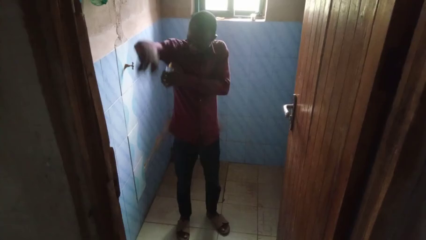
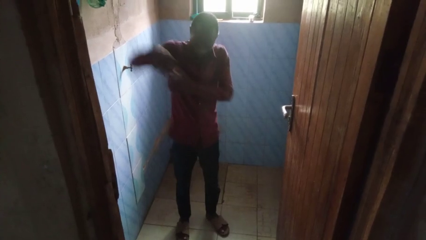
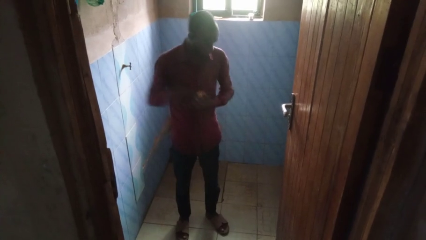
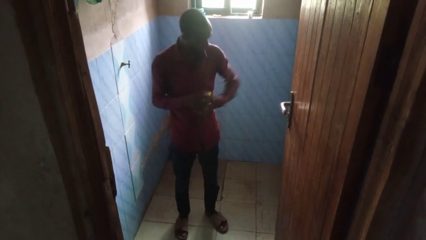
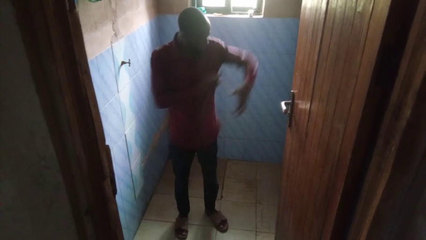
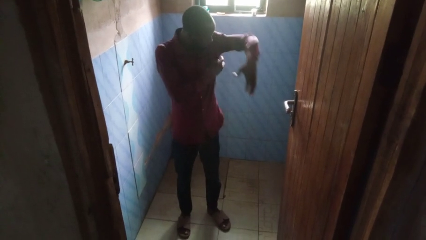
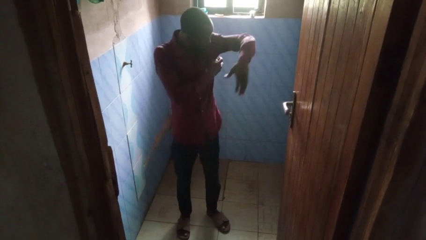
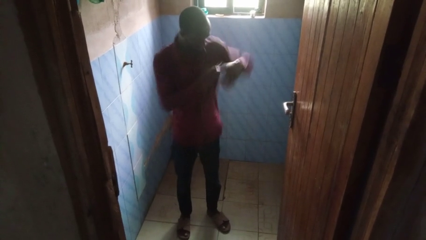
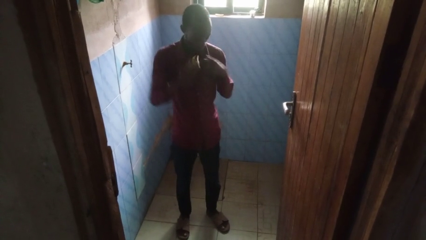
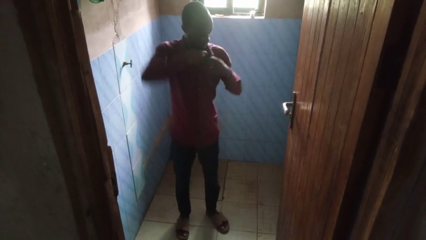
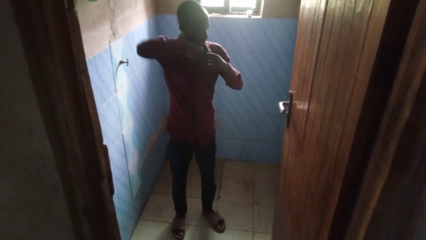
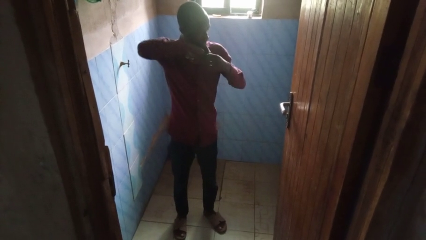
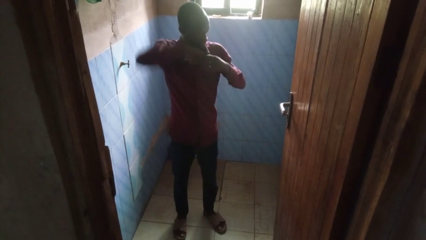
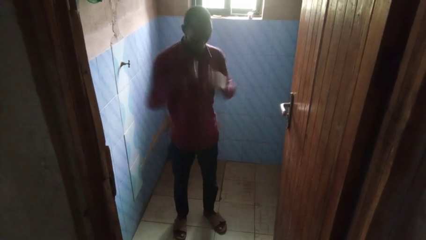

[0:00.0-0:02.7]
person applies deodorant

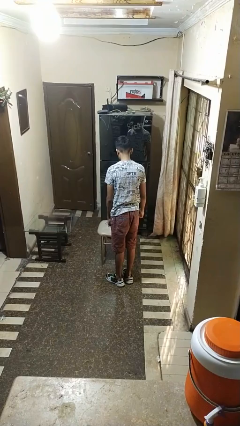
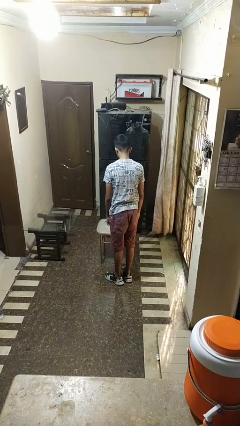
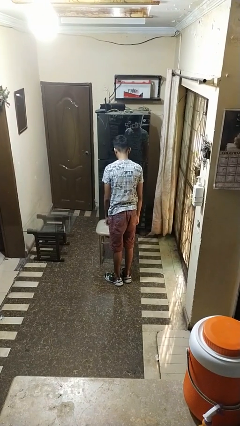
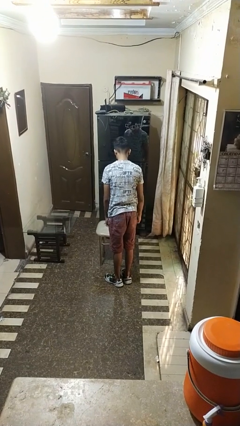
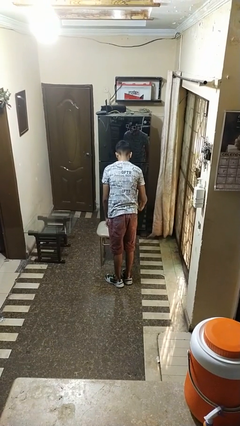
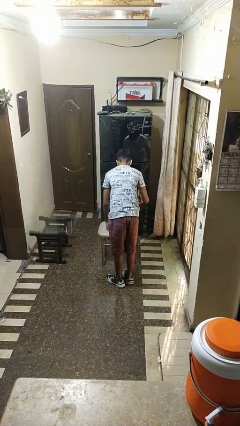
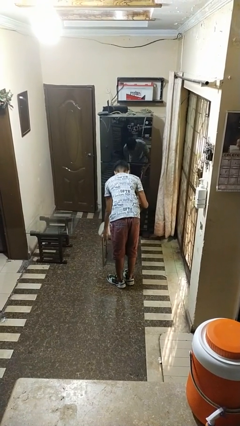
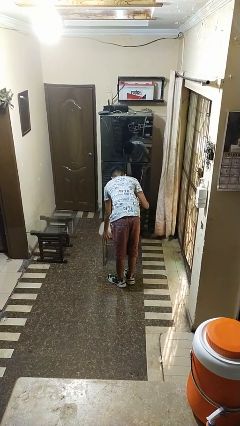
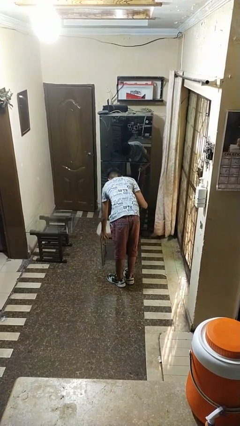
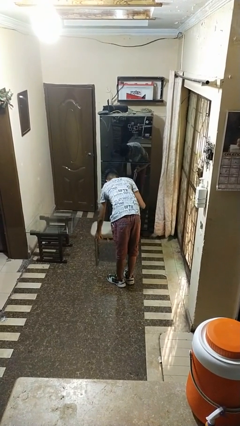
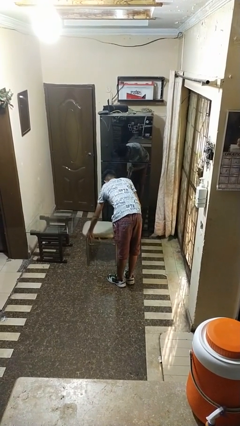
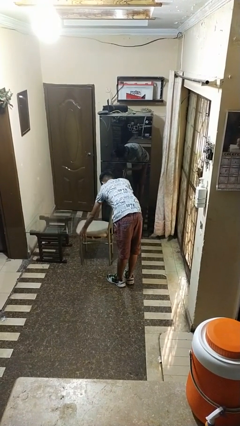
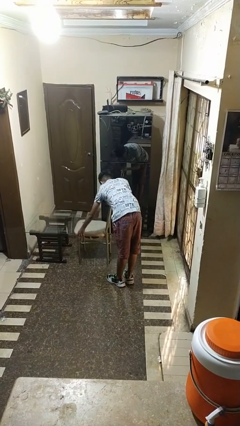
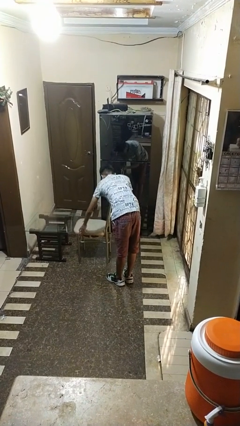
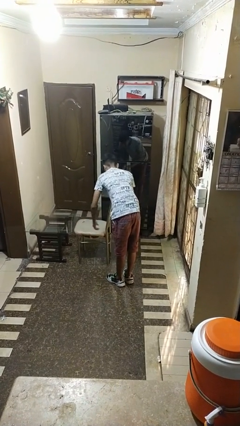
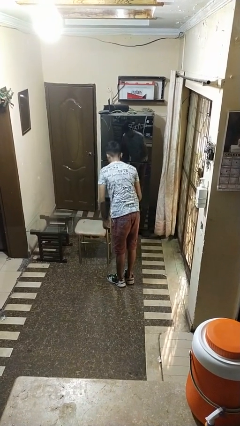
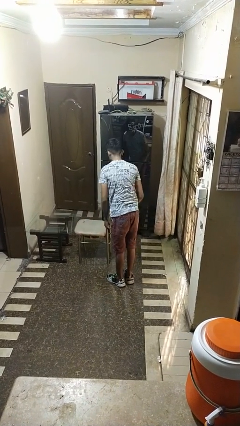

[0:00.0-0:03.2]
person pushes in chair

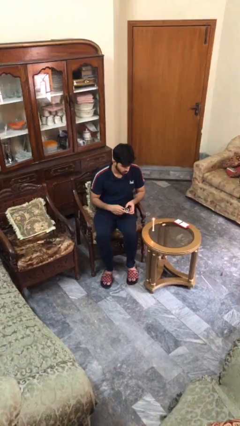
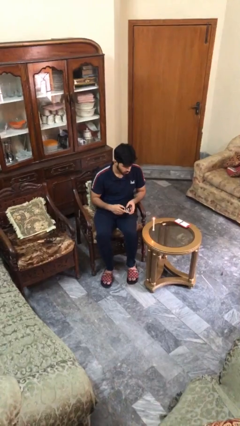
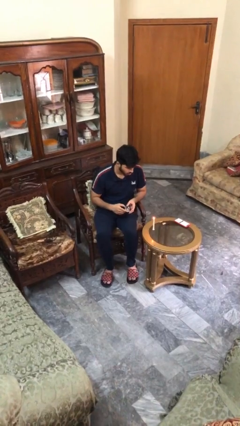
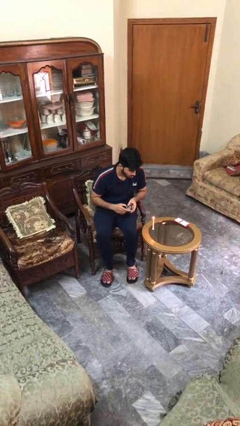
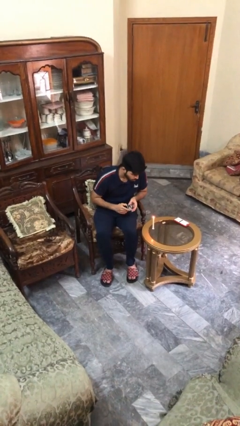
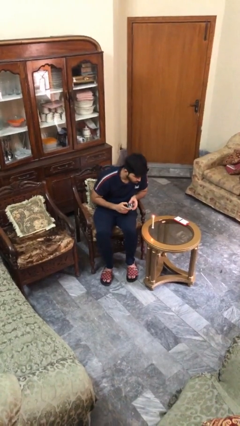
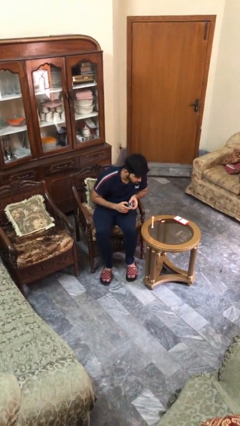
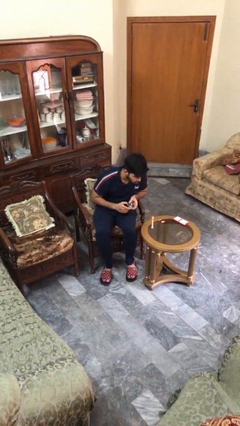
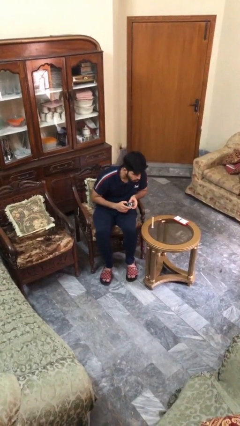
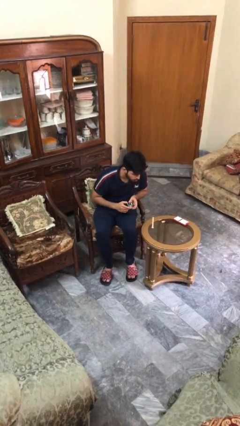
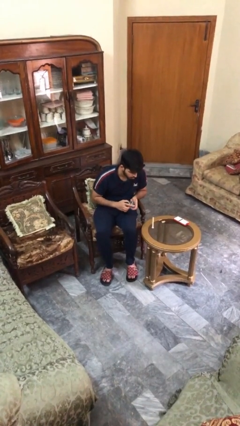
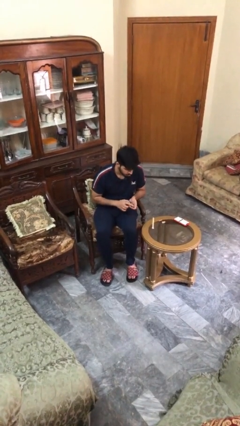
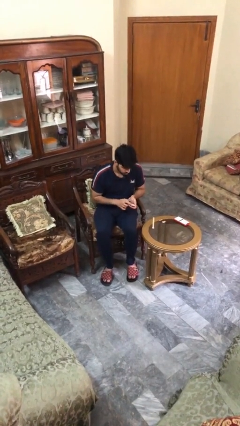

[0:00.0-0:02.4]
person extinguishes candle

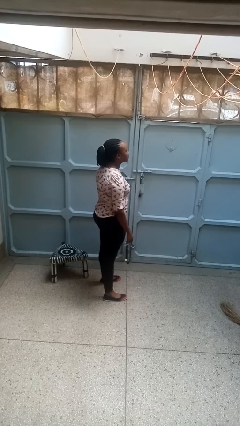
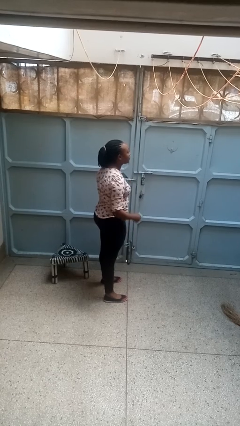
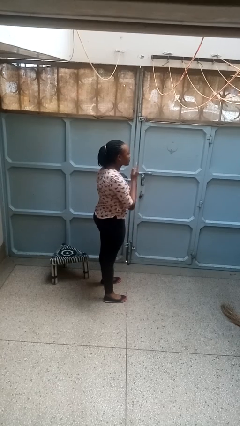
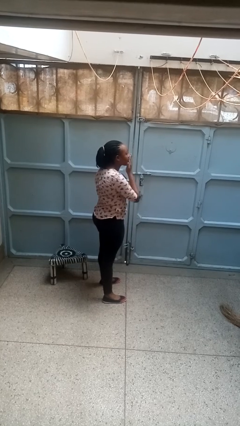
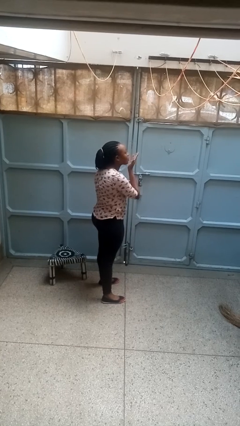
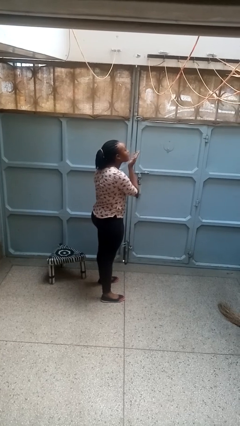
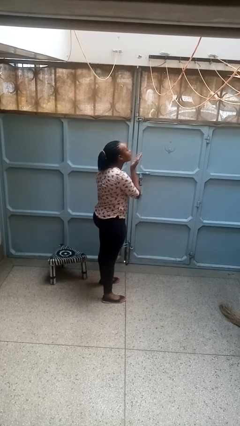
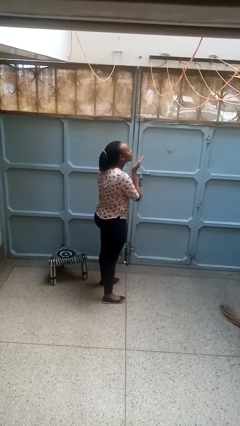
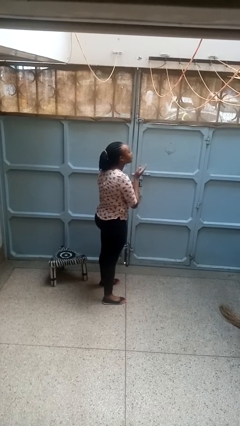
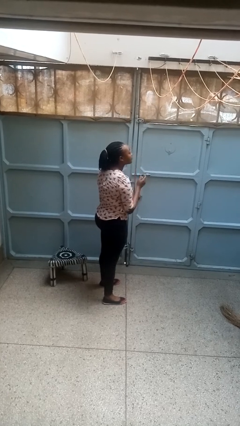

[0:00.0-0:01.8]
person gestures blow kiss

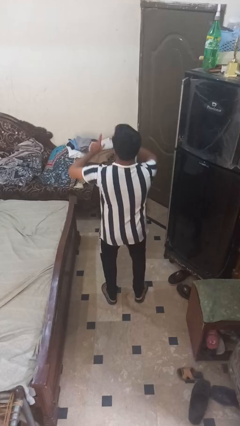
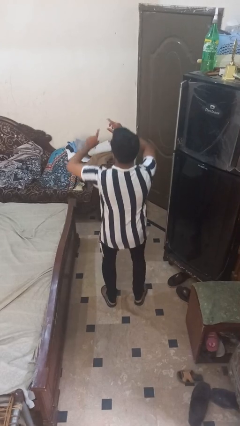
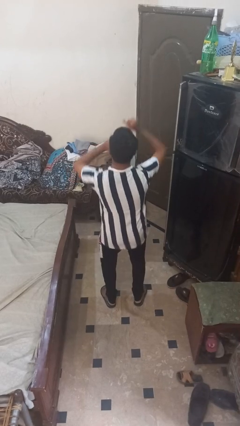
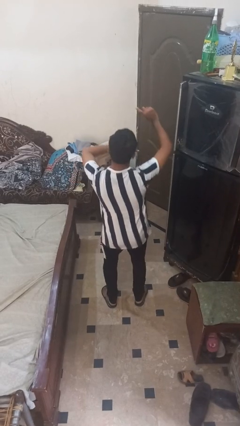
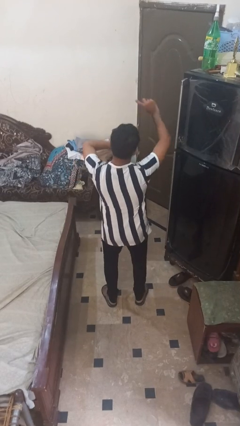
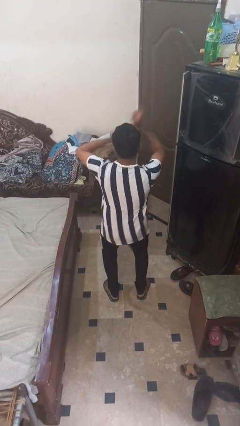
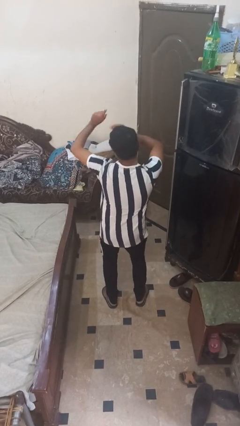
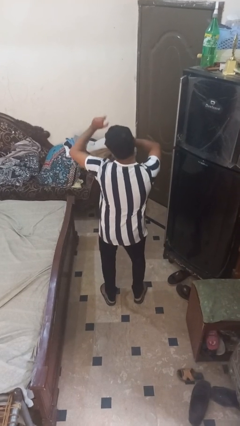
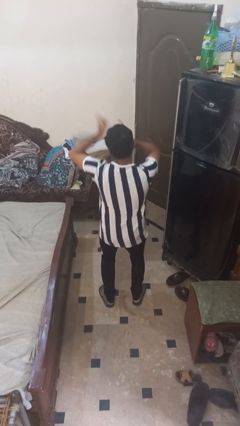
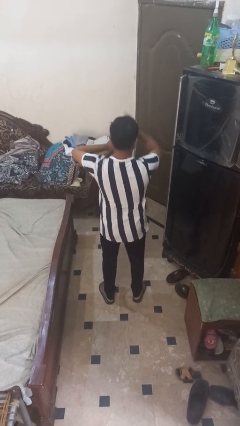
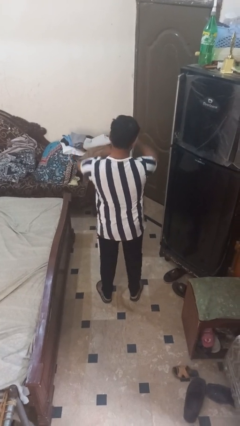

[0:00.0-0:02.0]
person dances in place

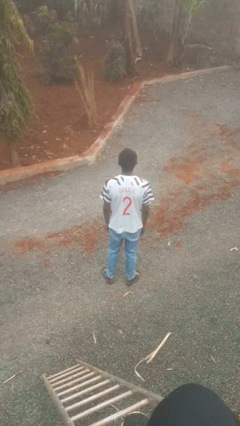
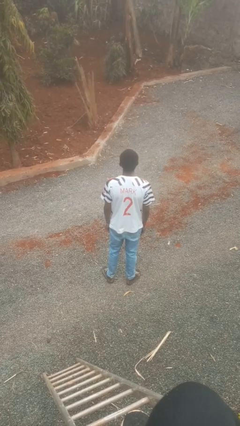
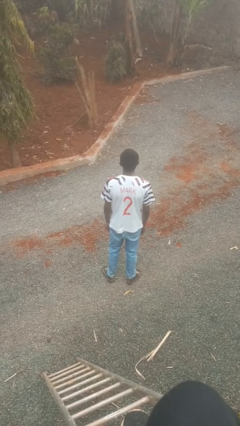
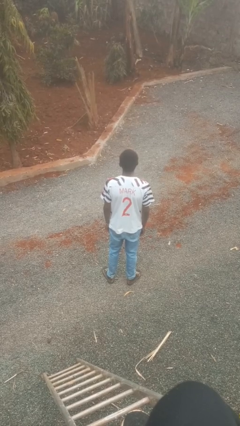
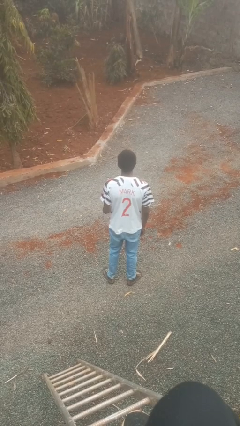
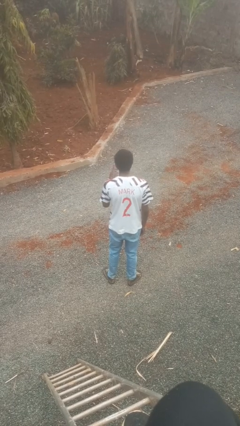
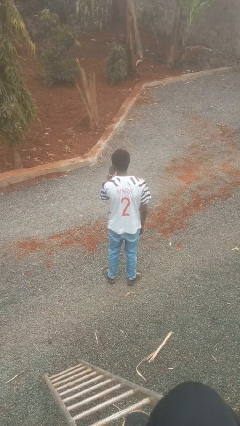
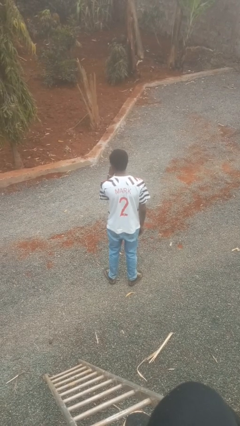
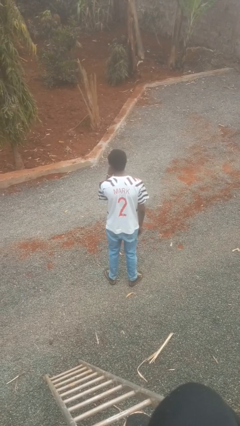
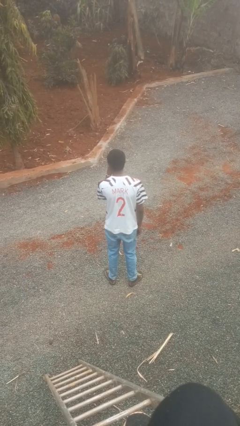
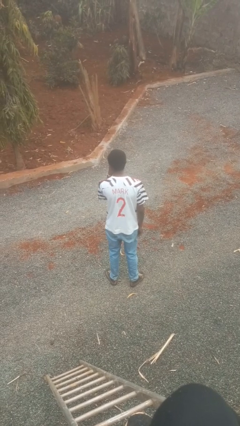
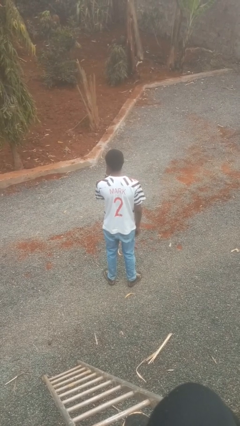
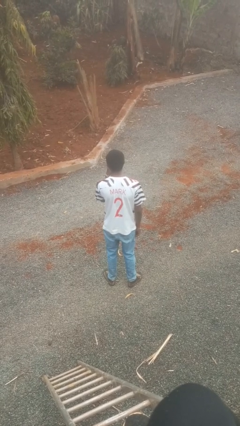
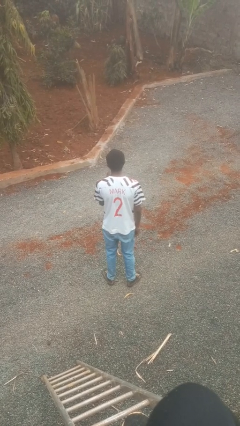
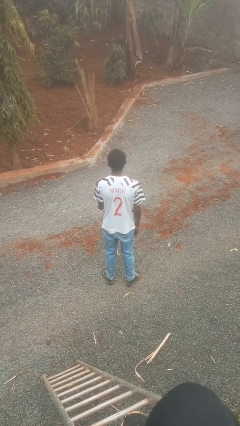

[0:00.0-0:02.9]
person gestures be quiet

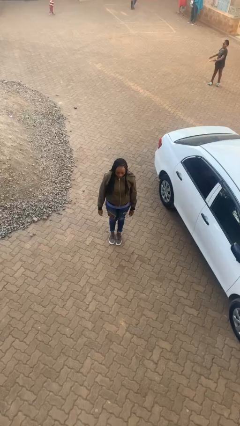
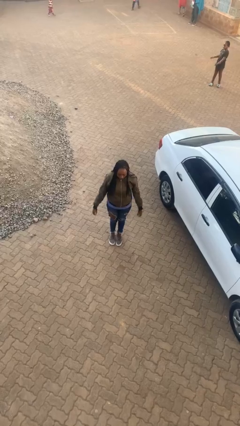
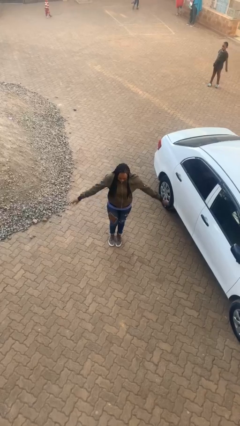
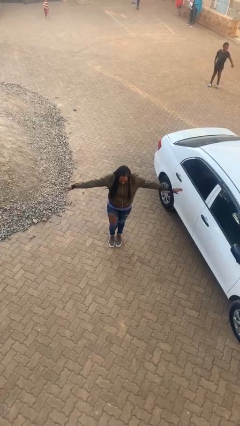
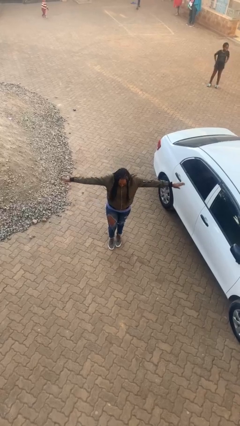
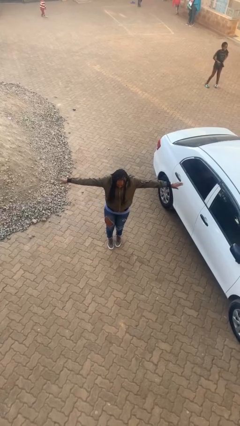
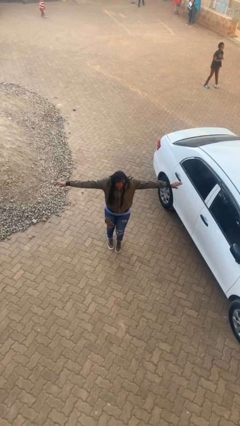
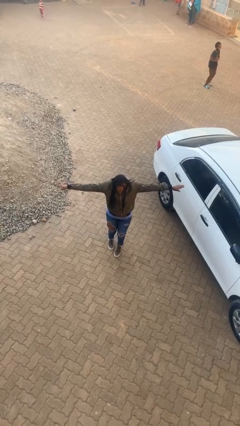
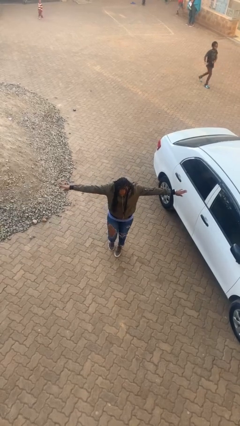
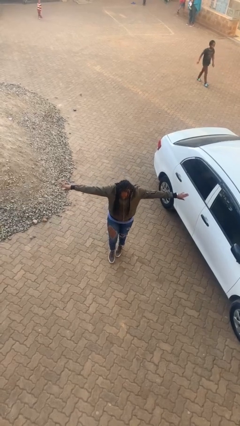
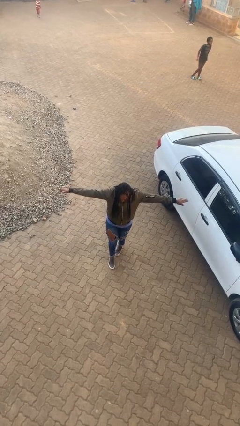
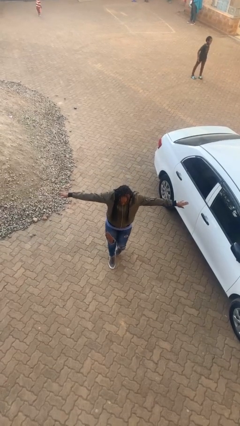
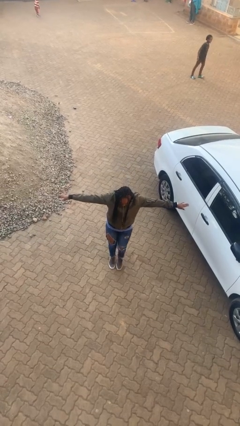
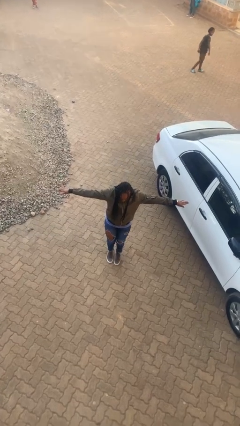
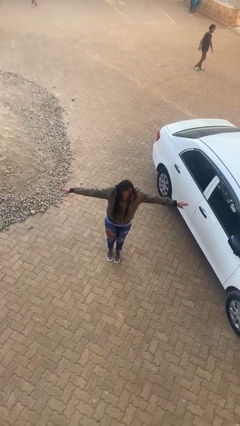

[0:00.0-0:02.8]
person walks tiptoe
